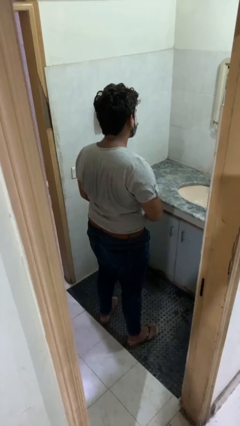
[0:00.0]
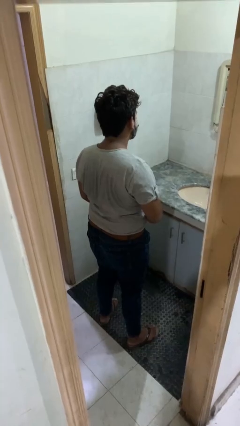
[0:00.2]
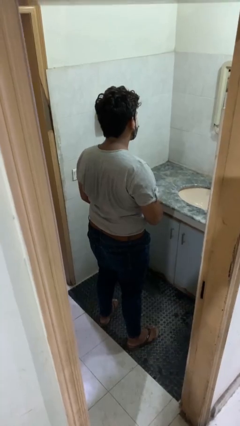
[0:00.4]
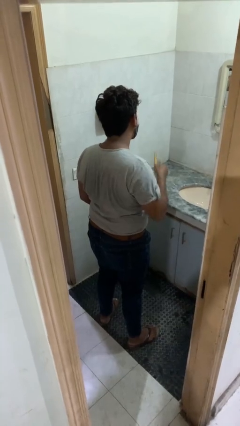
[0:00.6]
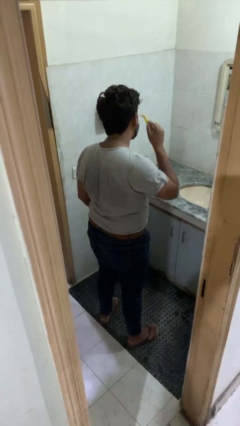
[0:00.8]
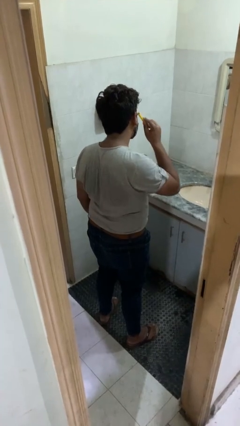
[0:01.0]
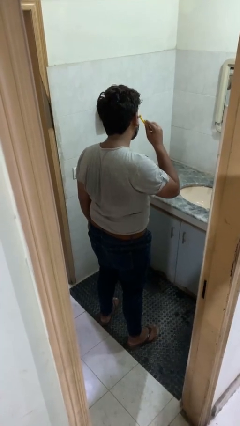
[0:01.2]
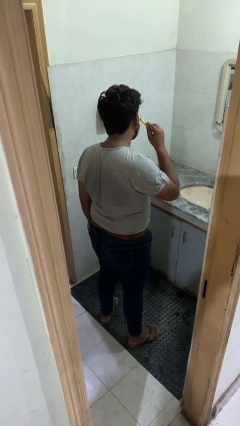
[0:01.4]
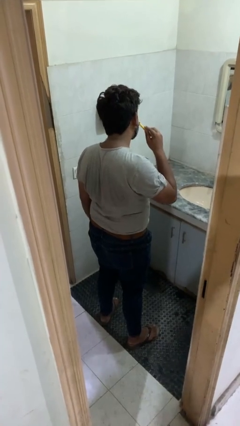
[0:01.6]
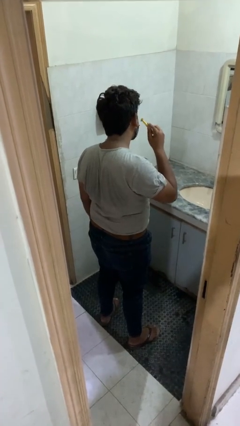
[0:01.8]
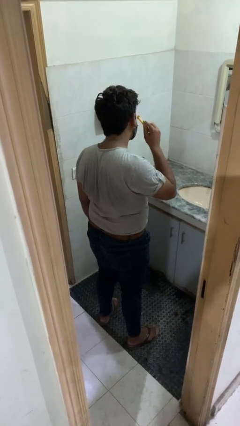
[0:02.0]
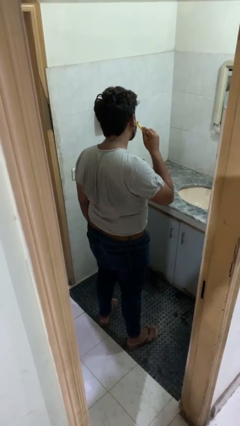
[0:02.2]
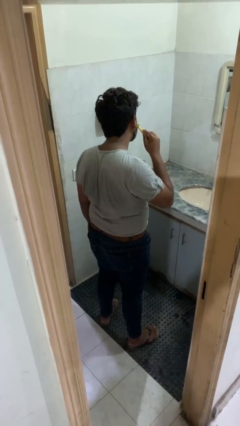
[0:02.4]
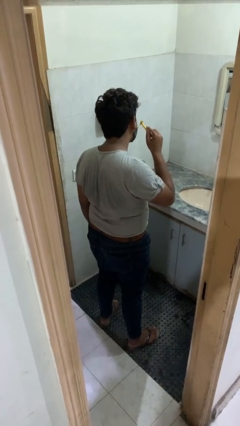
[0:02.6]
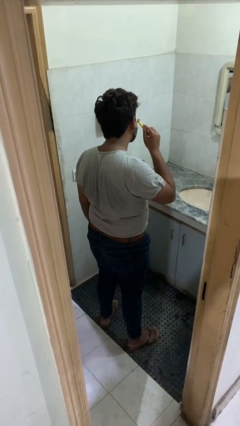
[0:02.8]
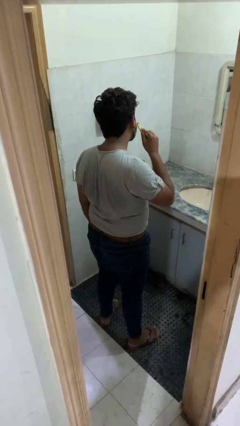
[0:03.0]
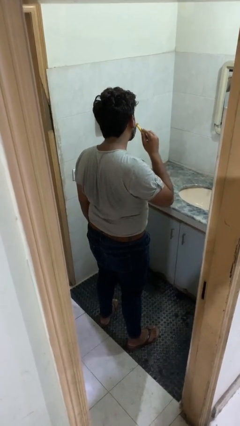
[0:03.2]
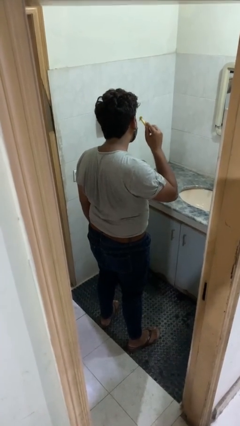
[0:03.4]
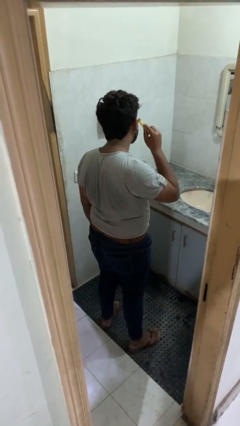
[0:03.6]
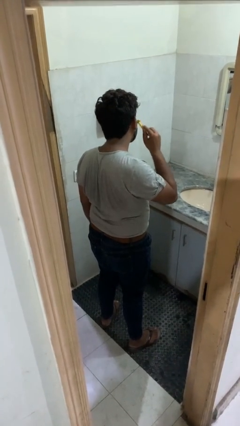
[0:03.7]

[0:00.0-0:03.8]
person shaves face

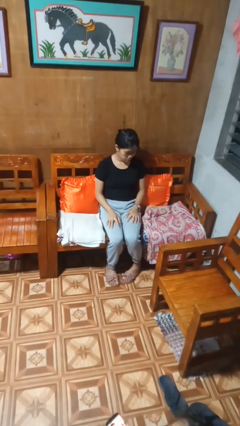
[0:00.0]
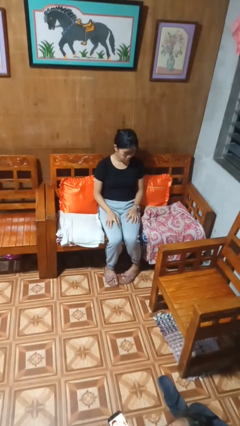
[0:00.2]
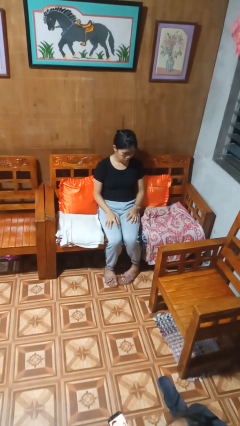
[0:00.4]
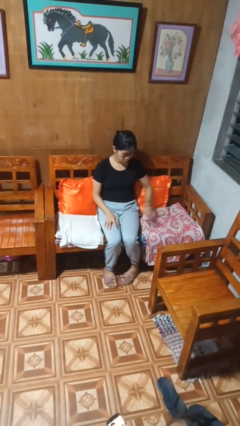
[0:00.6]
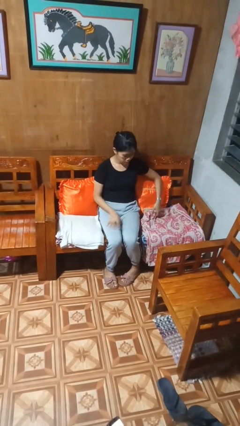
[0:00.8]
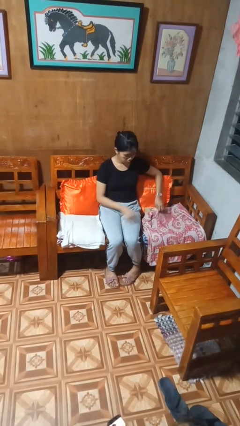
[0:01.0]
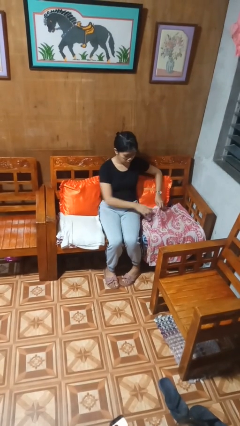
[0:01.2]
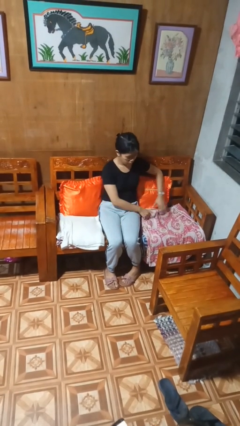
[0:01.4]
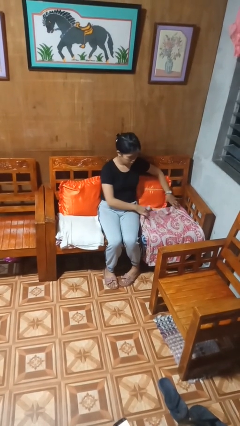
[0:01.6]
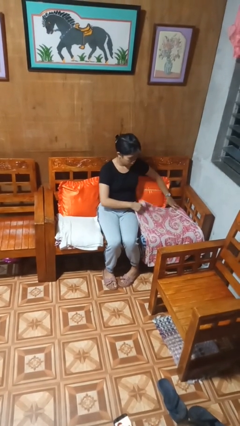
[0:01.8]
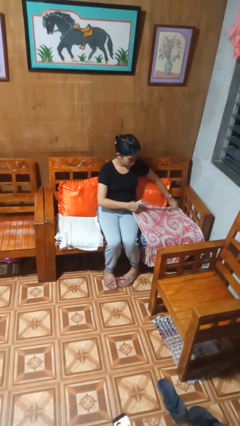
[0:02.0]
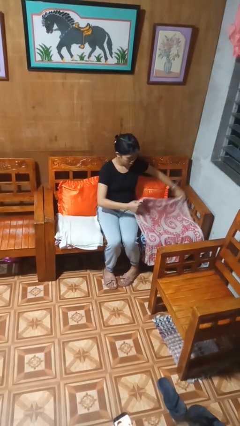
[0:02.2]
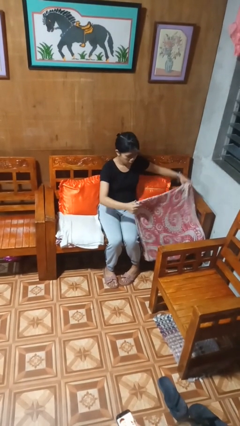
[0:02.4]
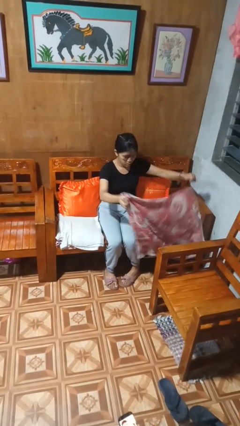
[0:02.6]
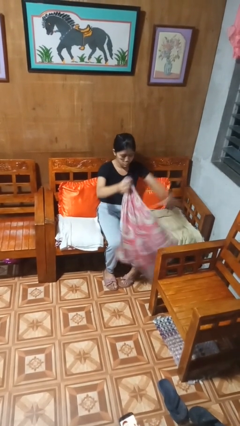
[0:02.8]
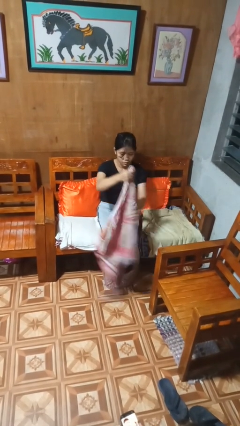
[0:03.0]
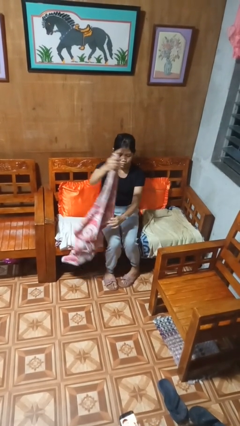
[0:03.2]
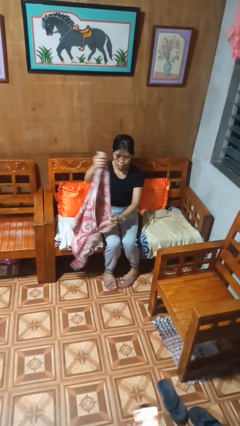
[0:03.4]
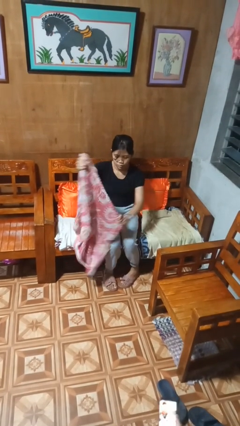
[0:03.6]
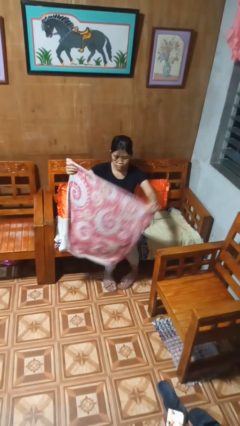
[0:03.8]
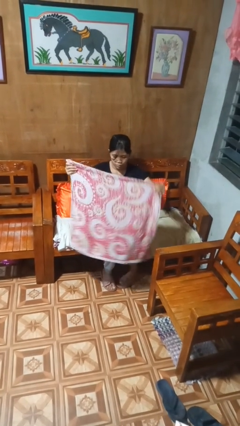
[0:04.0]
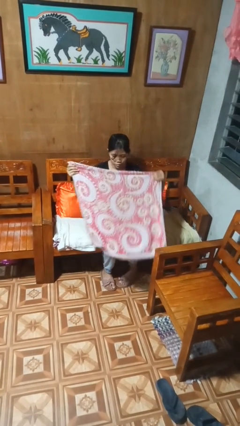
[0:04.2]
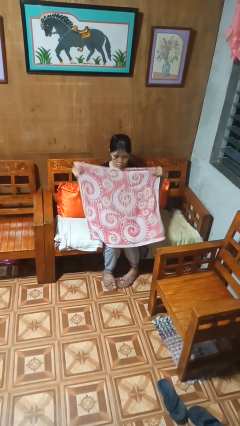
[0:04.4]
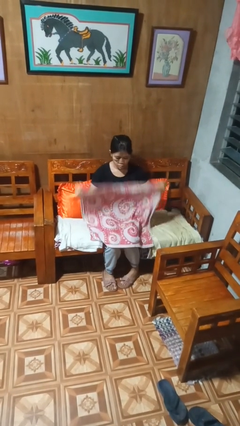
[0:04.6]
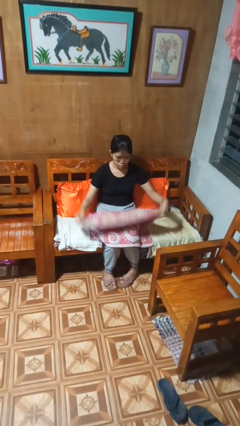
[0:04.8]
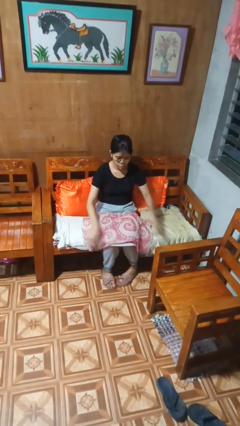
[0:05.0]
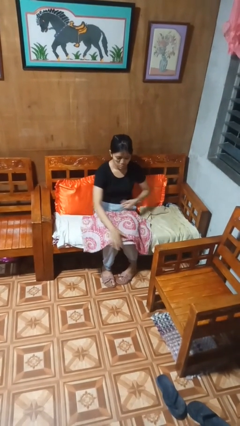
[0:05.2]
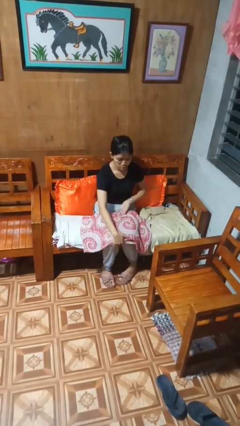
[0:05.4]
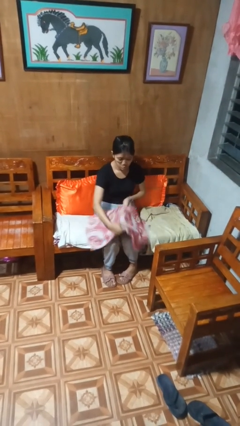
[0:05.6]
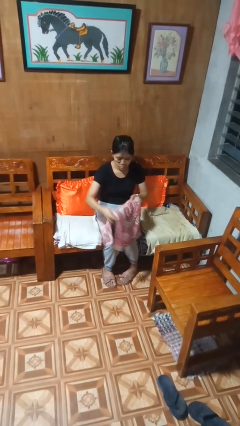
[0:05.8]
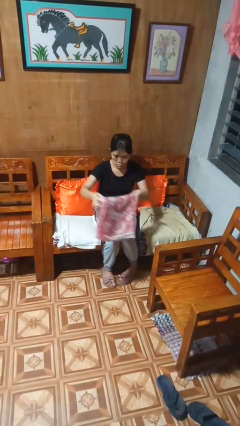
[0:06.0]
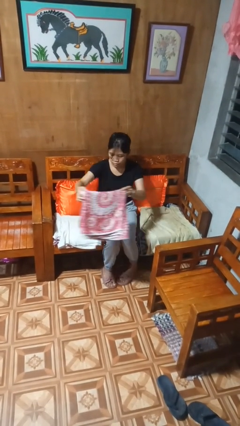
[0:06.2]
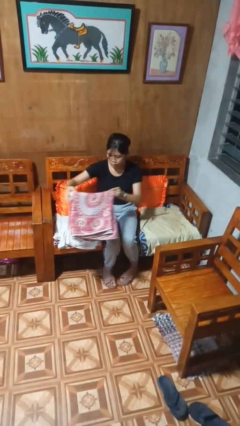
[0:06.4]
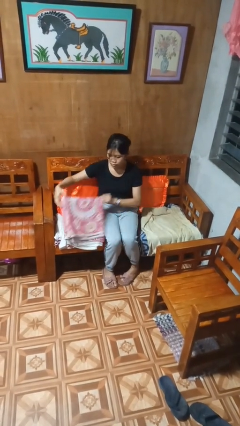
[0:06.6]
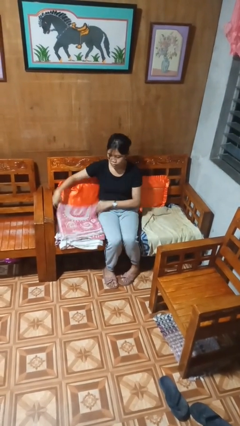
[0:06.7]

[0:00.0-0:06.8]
person folds towel

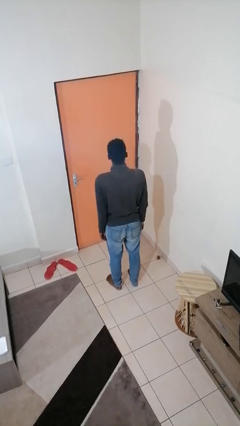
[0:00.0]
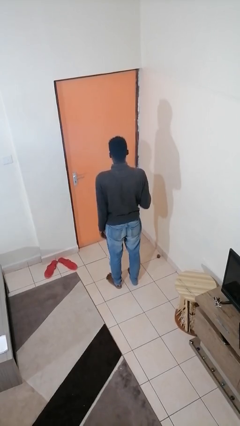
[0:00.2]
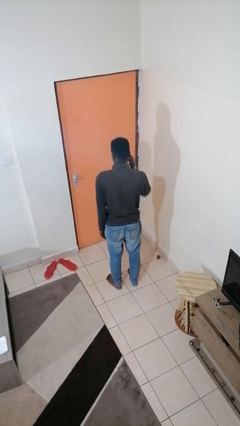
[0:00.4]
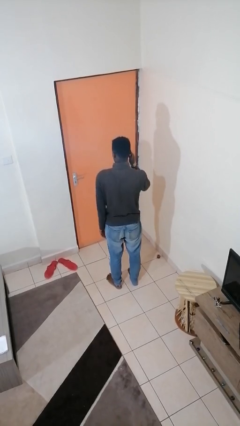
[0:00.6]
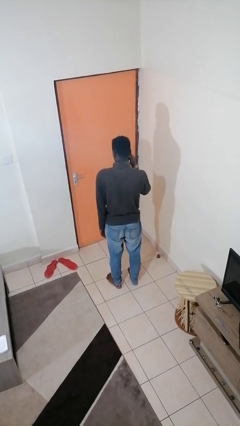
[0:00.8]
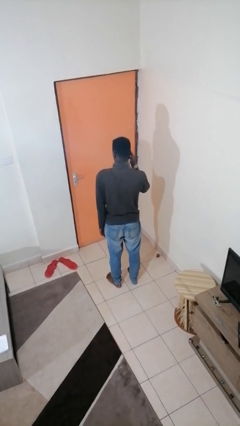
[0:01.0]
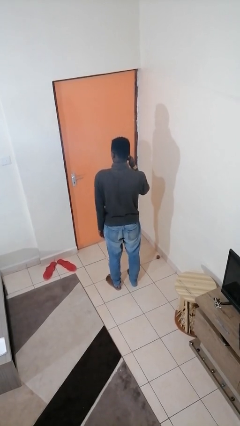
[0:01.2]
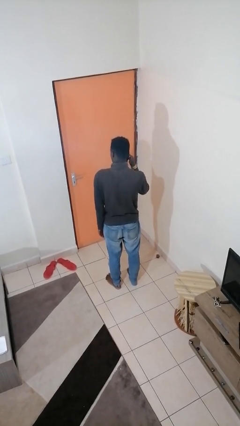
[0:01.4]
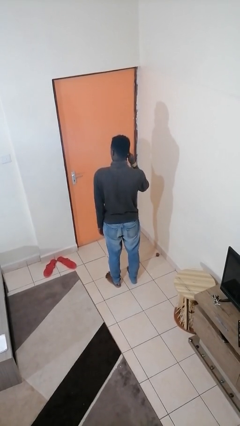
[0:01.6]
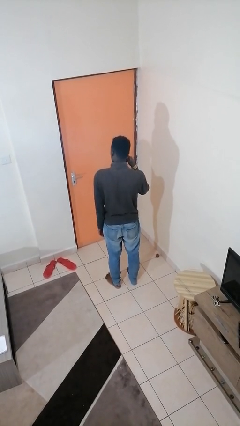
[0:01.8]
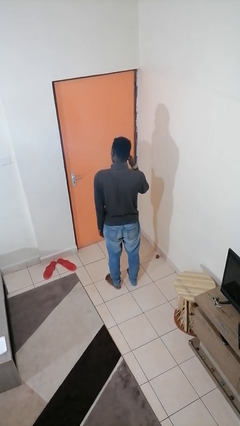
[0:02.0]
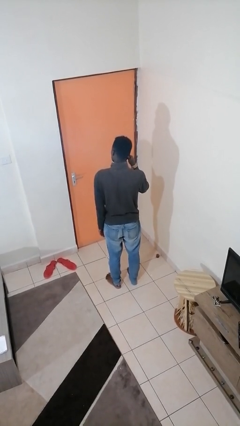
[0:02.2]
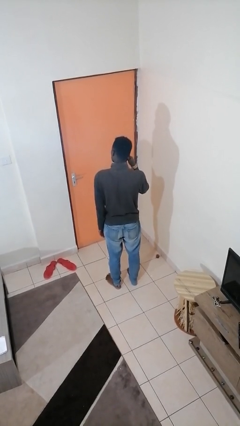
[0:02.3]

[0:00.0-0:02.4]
person touches earlobe

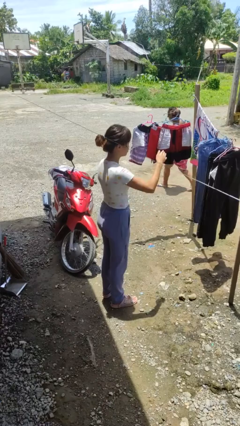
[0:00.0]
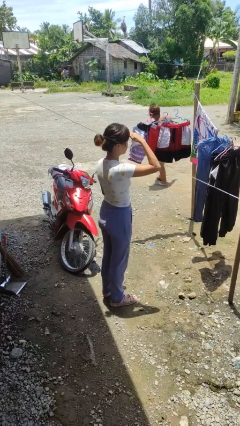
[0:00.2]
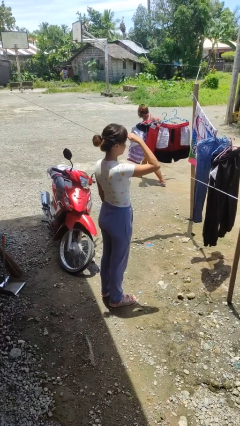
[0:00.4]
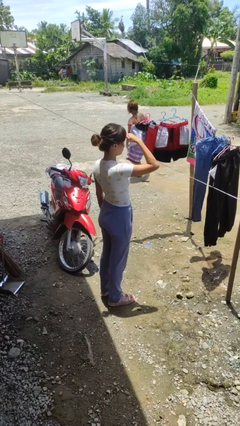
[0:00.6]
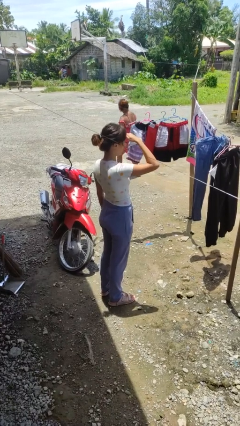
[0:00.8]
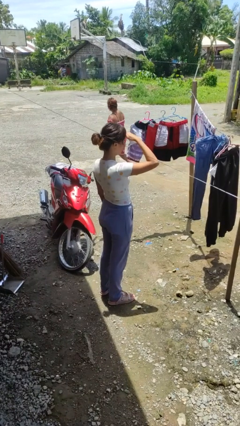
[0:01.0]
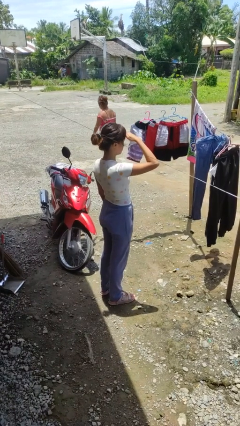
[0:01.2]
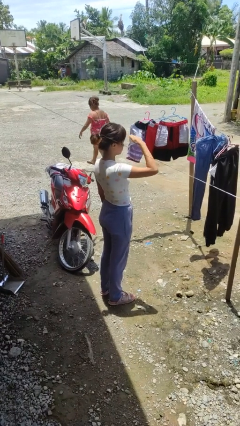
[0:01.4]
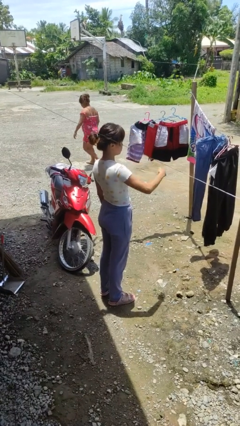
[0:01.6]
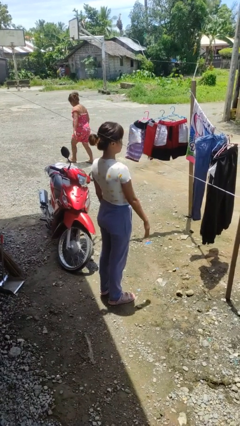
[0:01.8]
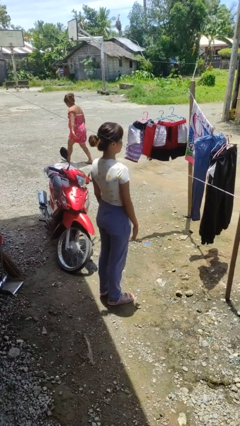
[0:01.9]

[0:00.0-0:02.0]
person shades eyes

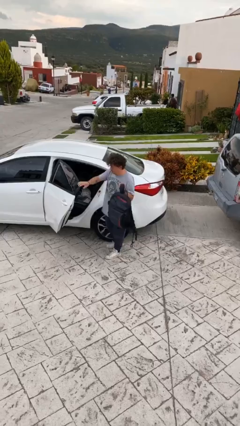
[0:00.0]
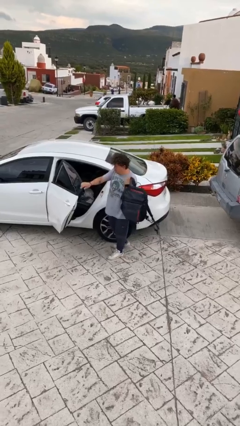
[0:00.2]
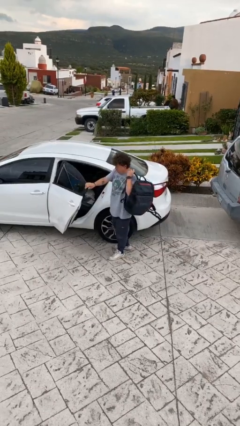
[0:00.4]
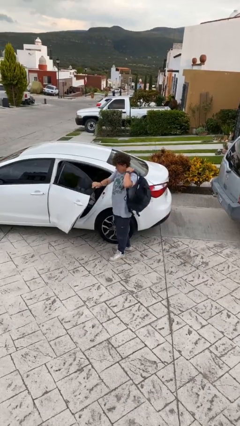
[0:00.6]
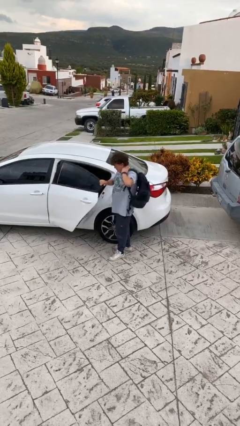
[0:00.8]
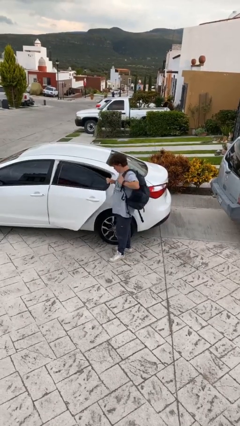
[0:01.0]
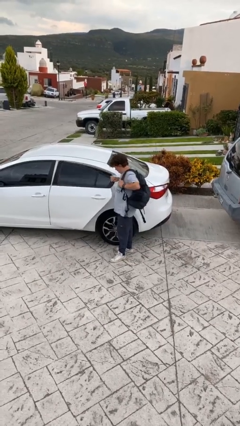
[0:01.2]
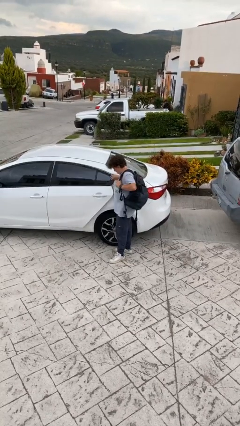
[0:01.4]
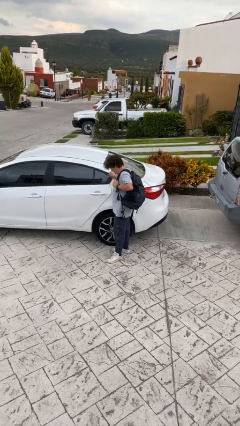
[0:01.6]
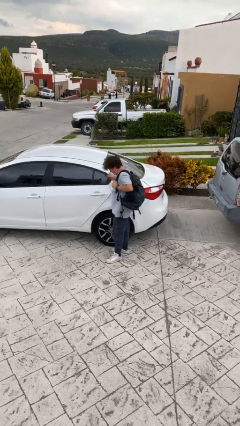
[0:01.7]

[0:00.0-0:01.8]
person closes car door

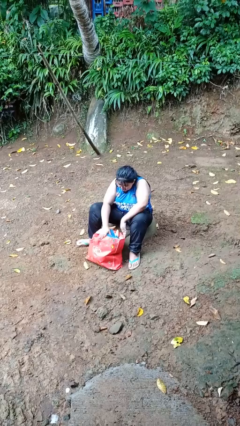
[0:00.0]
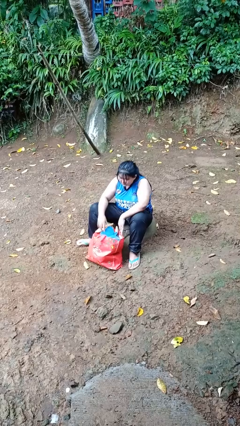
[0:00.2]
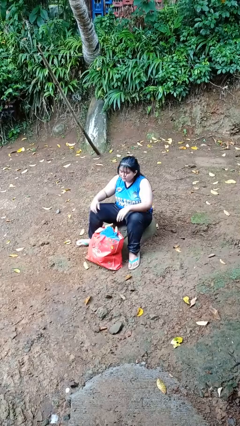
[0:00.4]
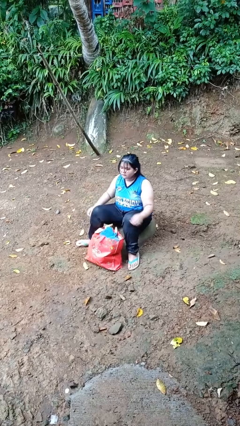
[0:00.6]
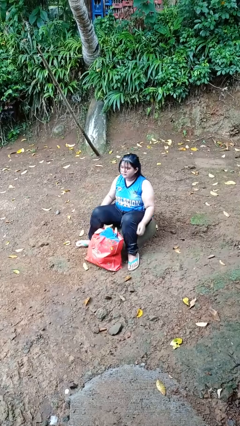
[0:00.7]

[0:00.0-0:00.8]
person searches in bag
